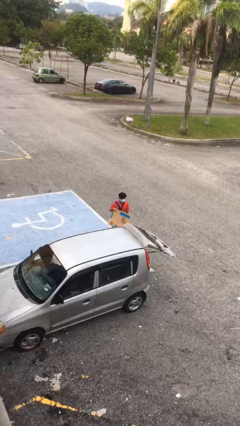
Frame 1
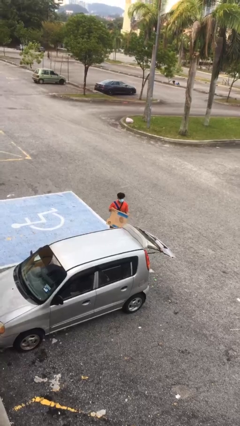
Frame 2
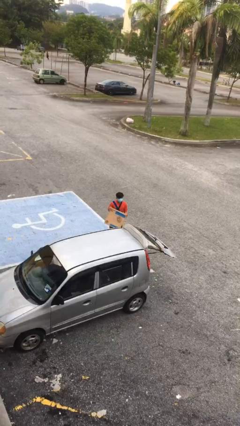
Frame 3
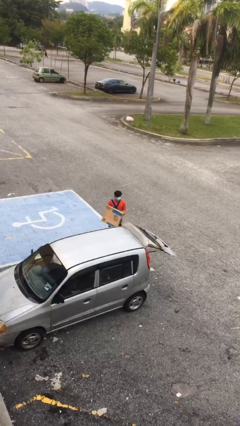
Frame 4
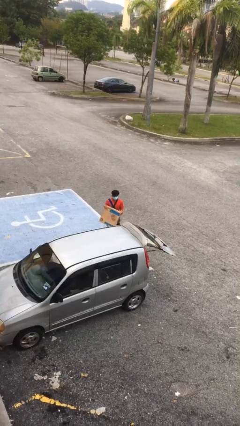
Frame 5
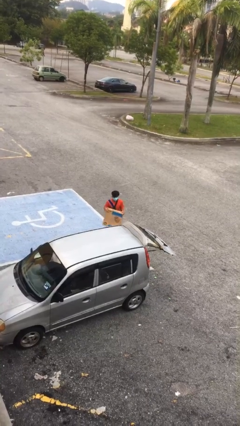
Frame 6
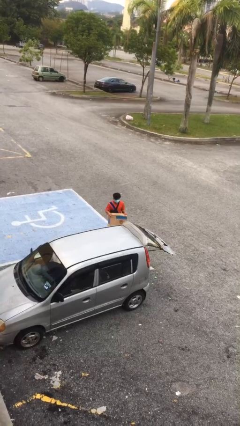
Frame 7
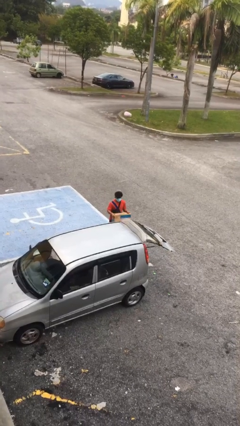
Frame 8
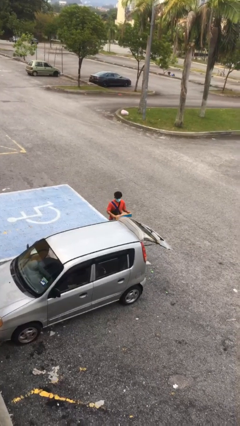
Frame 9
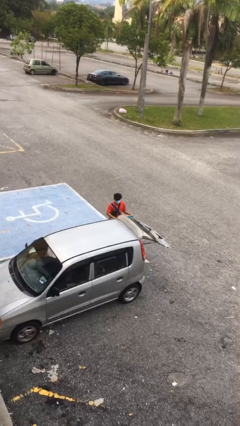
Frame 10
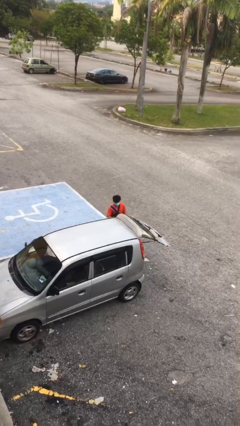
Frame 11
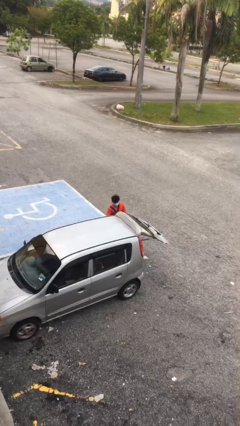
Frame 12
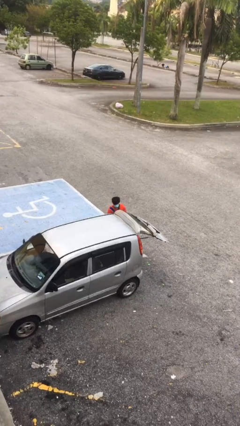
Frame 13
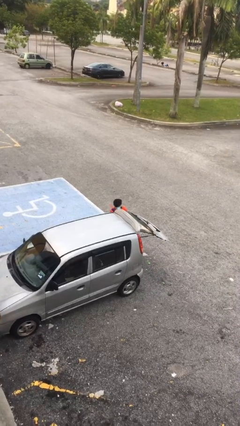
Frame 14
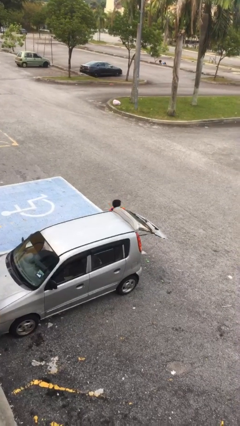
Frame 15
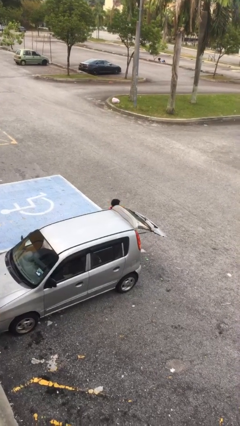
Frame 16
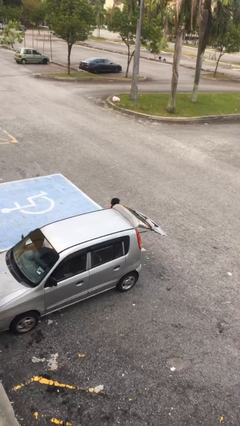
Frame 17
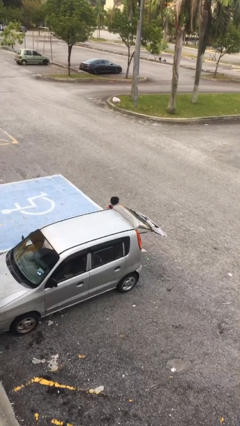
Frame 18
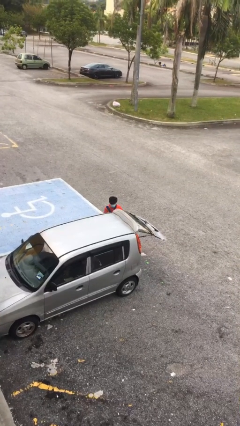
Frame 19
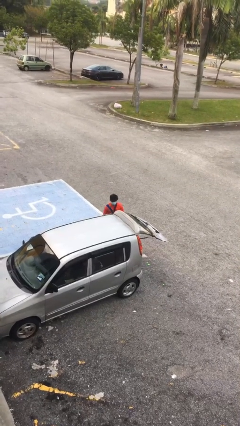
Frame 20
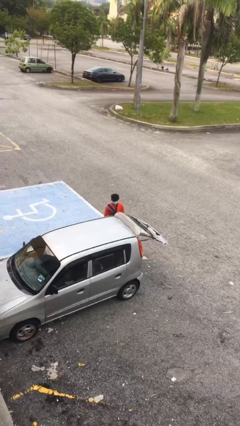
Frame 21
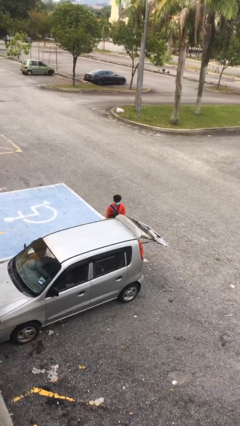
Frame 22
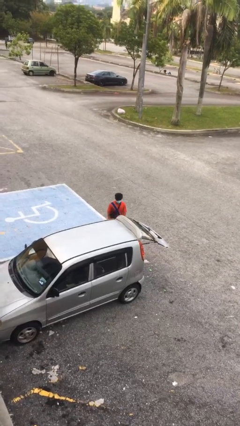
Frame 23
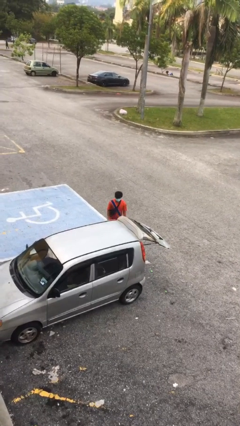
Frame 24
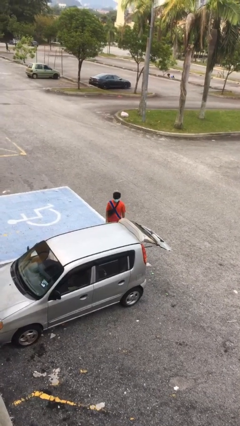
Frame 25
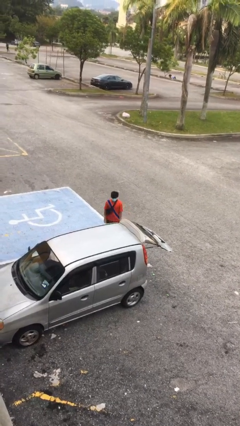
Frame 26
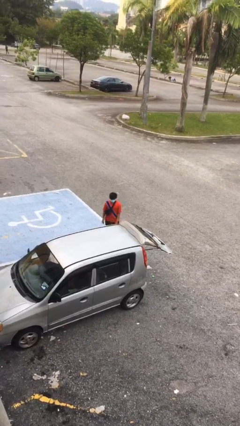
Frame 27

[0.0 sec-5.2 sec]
person loads car

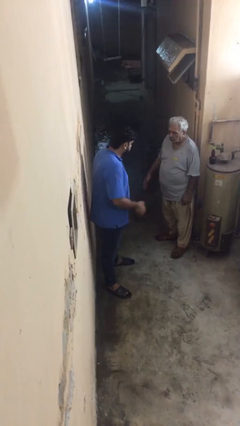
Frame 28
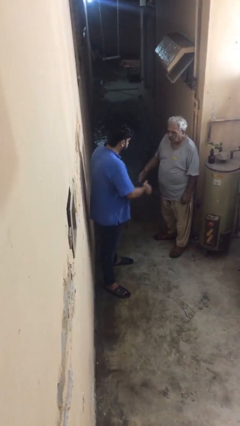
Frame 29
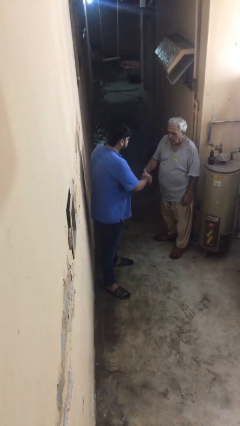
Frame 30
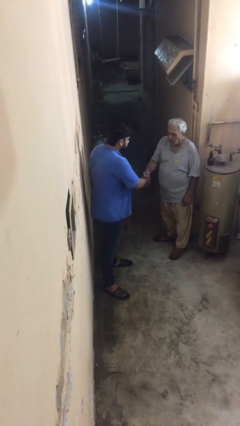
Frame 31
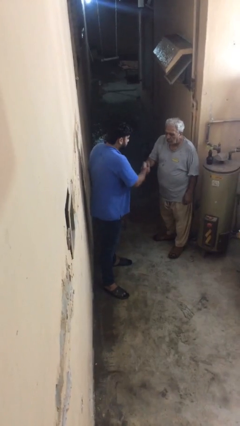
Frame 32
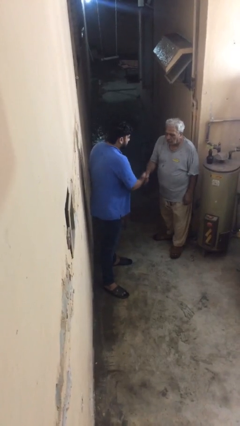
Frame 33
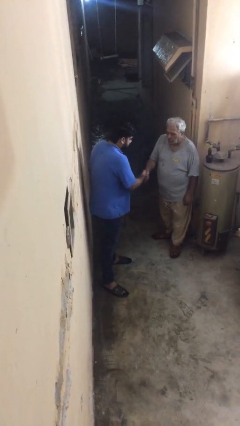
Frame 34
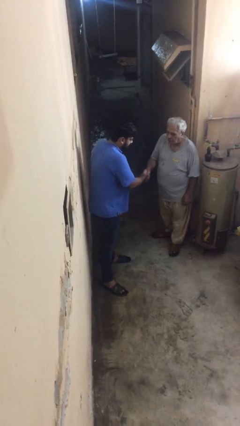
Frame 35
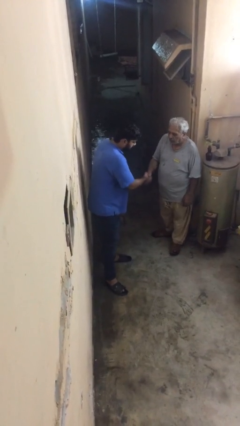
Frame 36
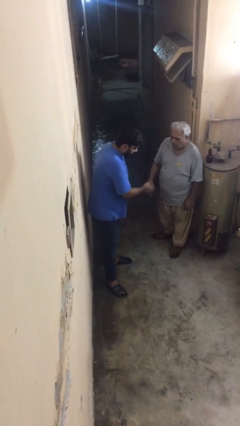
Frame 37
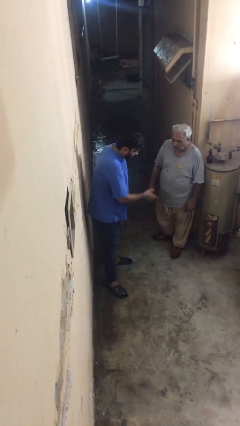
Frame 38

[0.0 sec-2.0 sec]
person shakes hand

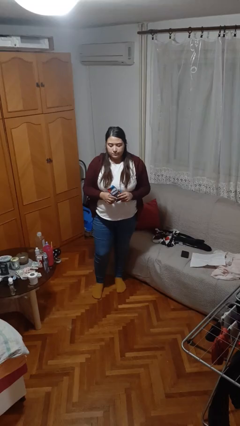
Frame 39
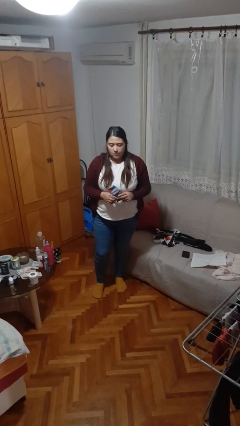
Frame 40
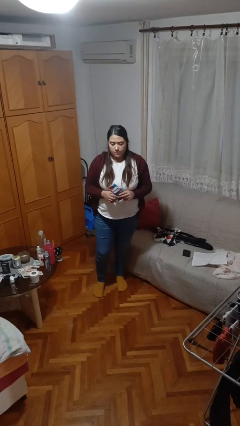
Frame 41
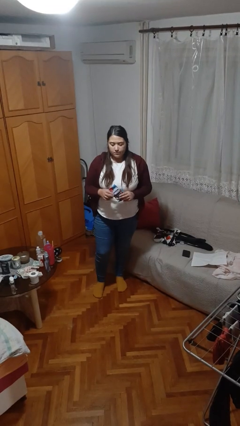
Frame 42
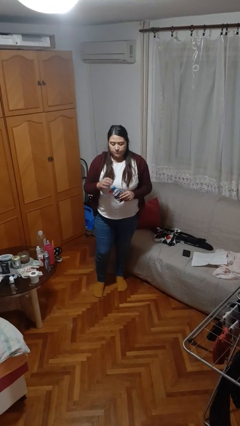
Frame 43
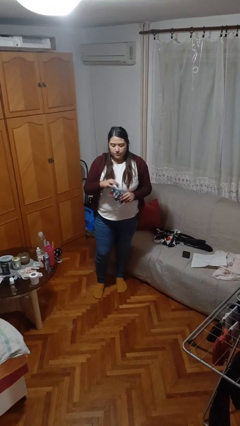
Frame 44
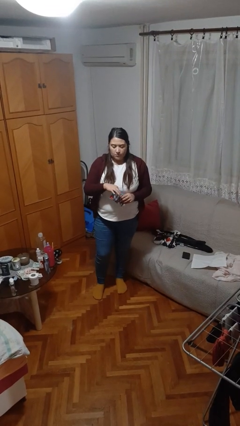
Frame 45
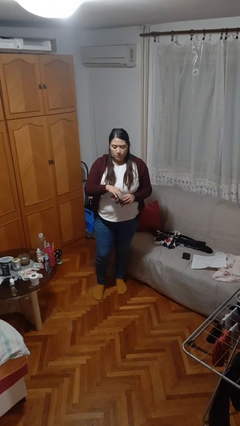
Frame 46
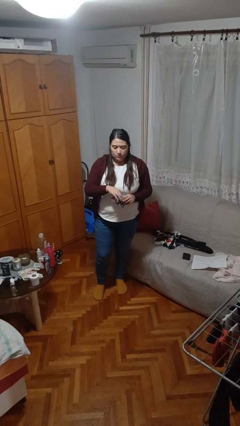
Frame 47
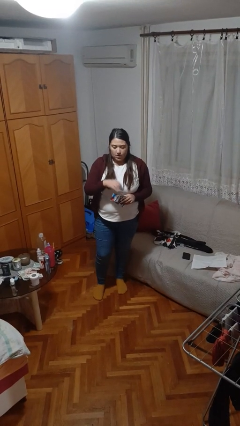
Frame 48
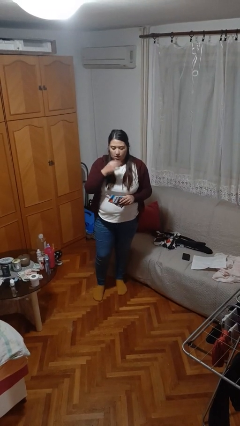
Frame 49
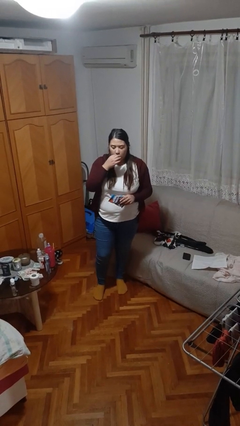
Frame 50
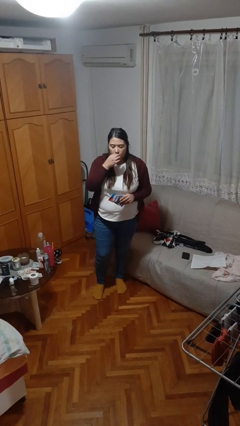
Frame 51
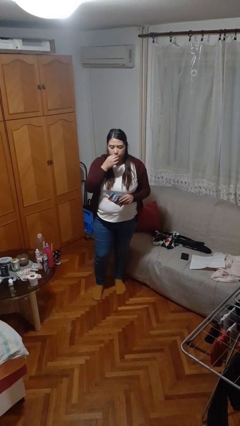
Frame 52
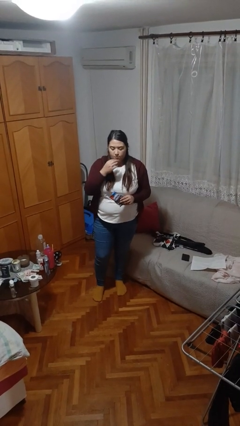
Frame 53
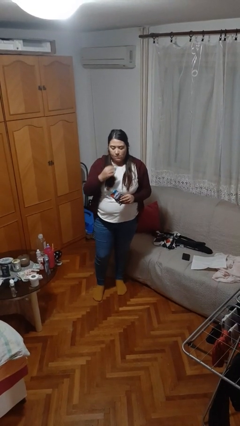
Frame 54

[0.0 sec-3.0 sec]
person eats snack from bag

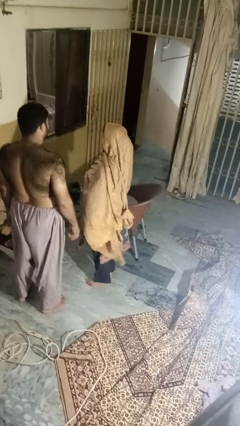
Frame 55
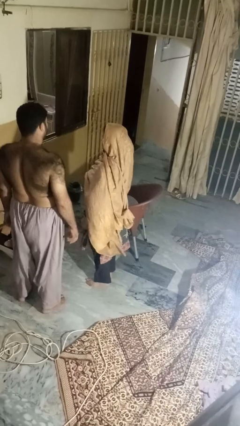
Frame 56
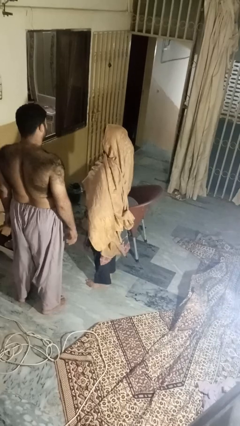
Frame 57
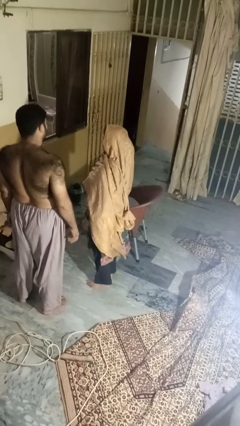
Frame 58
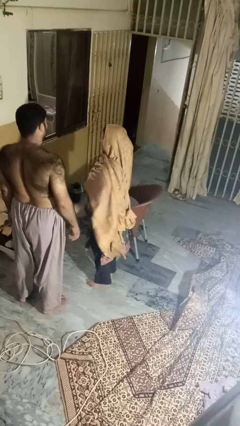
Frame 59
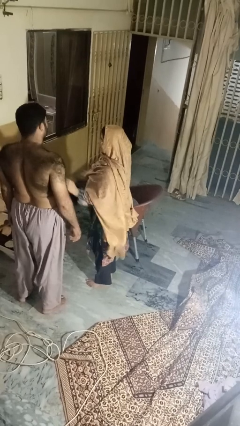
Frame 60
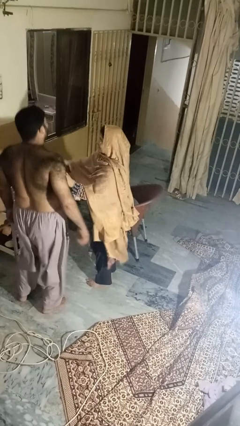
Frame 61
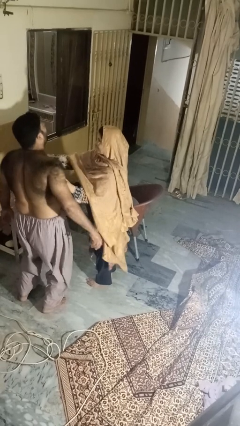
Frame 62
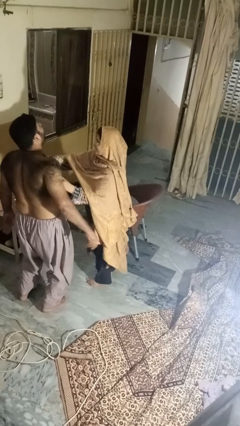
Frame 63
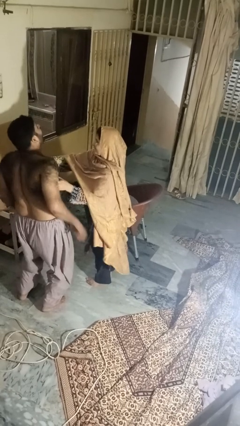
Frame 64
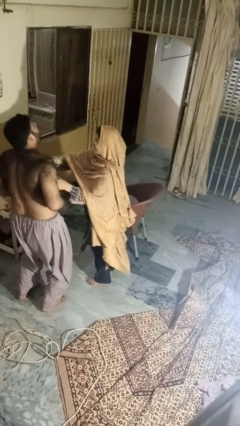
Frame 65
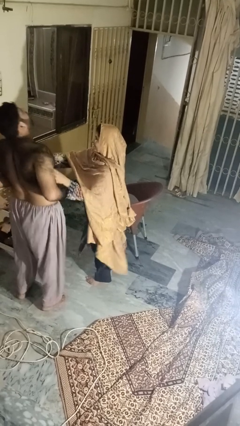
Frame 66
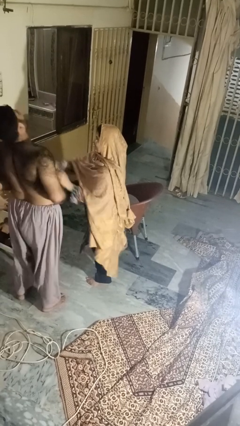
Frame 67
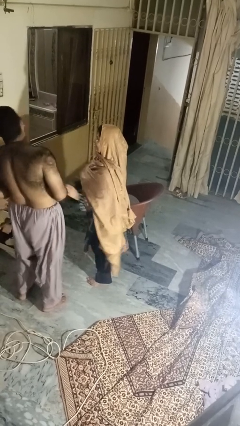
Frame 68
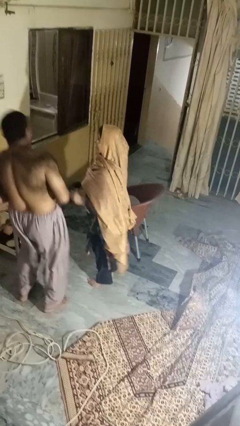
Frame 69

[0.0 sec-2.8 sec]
person tickles person

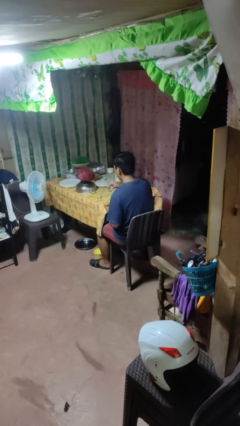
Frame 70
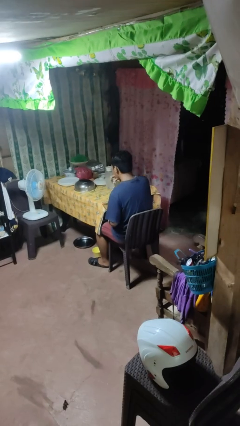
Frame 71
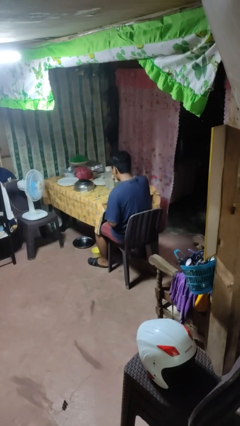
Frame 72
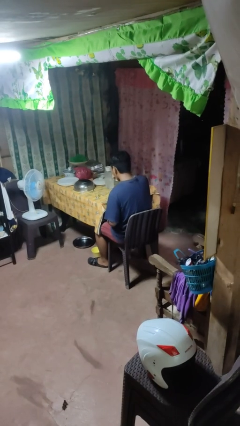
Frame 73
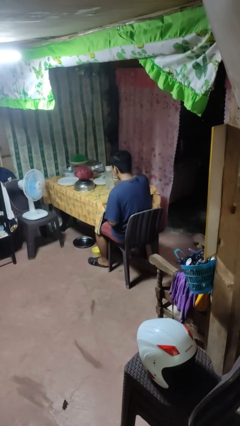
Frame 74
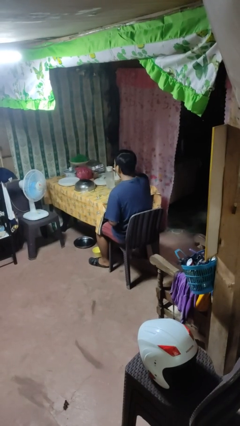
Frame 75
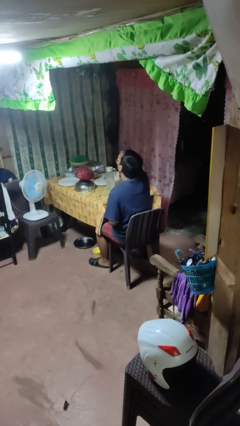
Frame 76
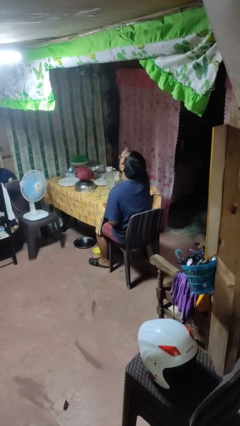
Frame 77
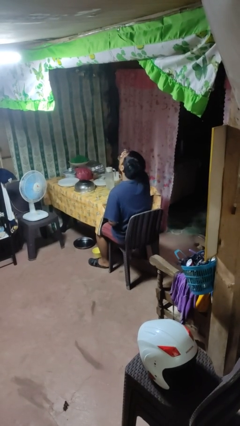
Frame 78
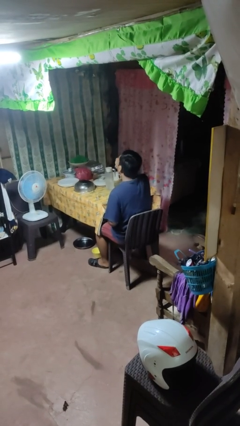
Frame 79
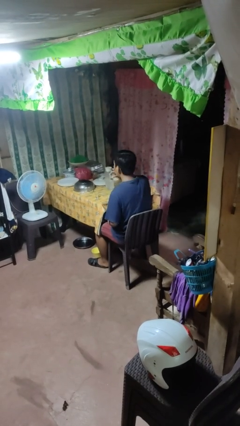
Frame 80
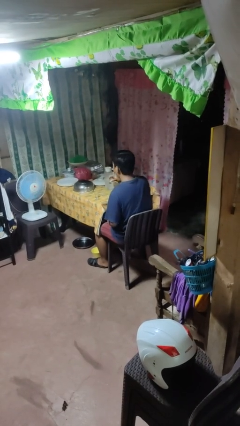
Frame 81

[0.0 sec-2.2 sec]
person drinks from shotglass

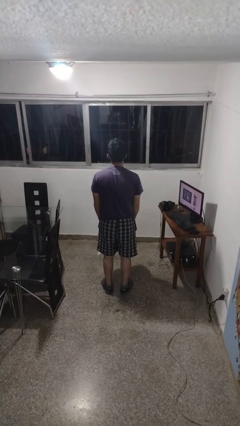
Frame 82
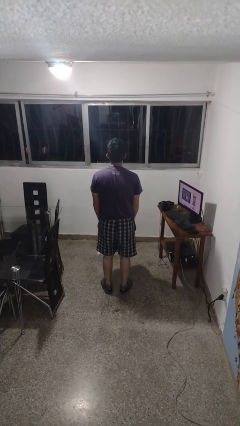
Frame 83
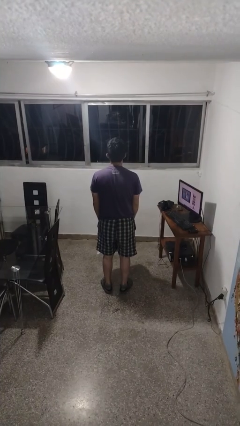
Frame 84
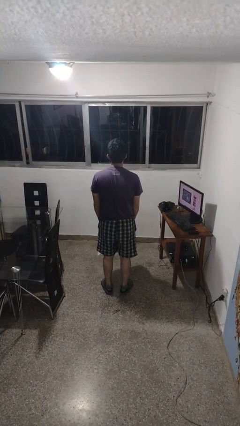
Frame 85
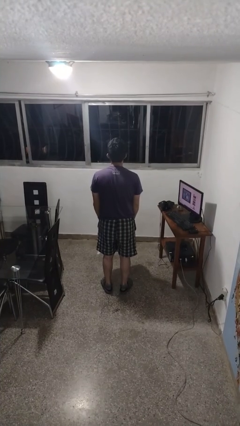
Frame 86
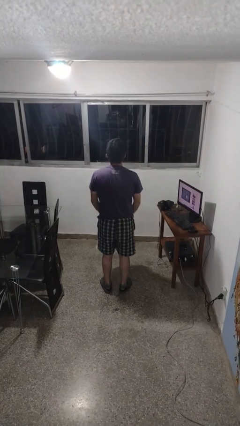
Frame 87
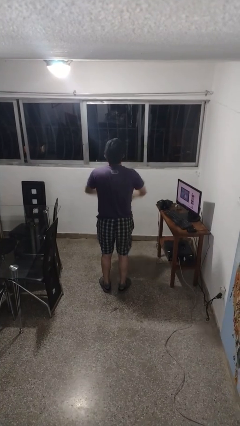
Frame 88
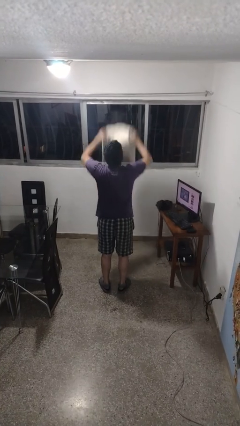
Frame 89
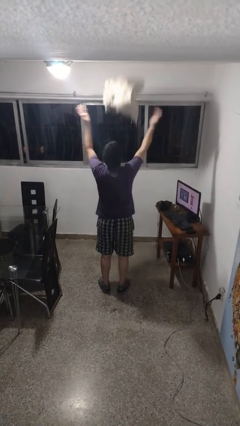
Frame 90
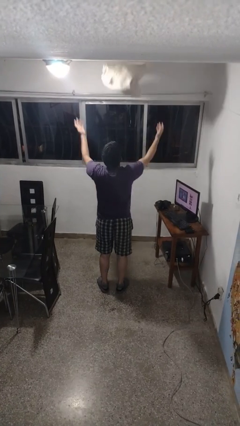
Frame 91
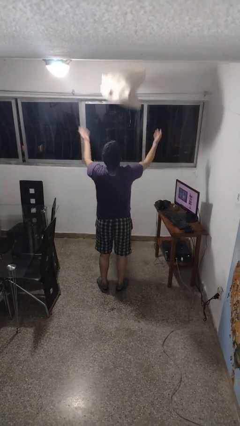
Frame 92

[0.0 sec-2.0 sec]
person drops object
